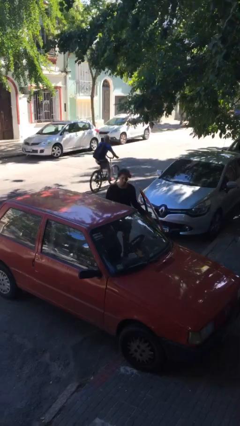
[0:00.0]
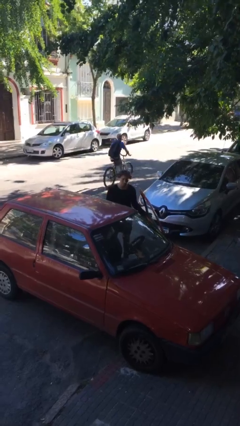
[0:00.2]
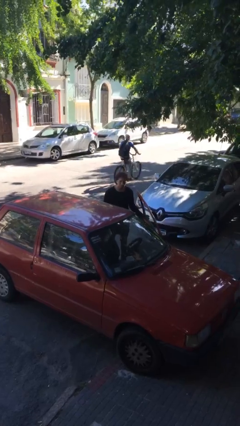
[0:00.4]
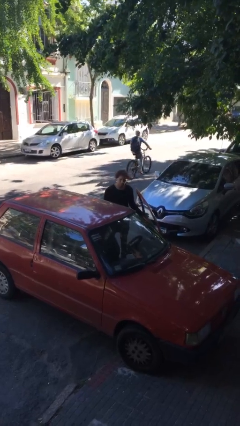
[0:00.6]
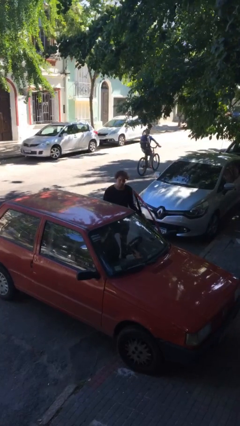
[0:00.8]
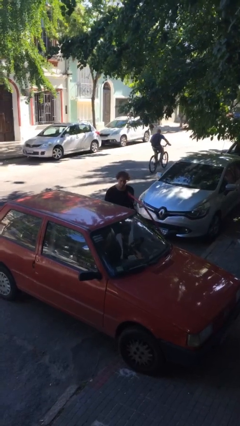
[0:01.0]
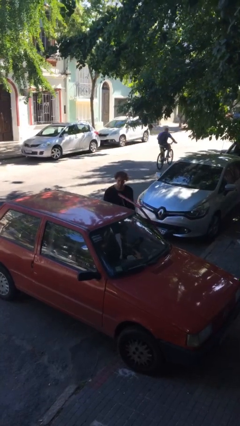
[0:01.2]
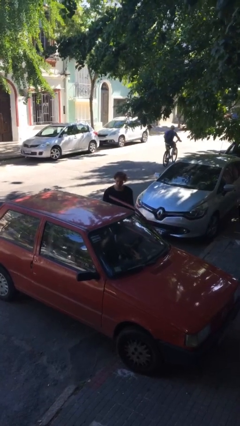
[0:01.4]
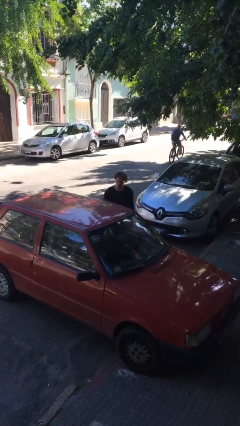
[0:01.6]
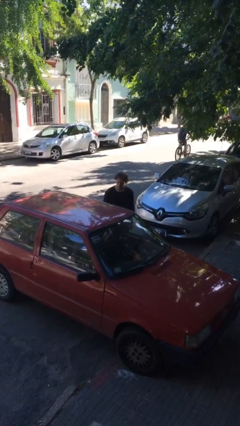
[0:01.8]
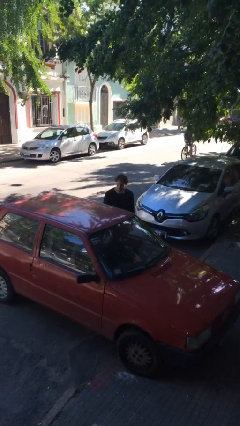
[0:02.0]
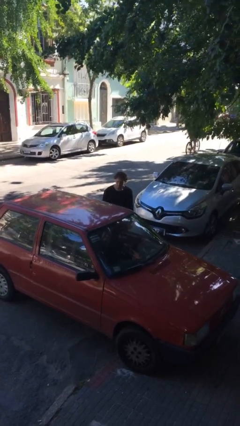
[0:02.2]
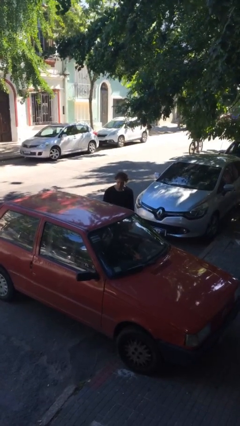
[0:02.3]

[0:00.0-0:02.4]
person closes car door

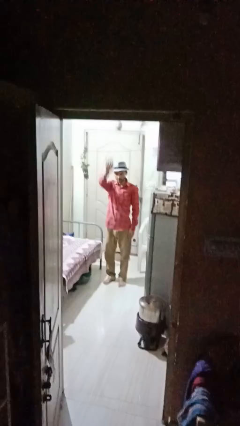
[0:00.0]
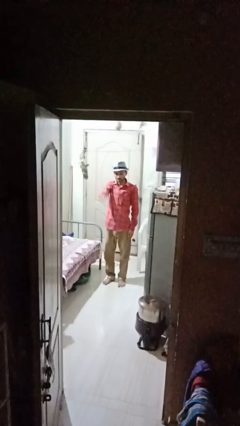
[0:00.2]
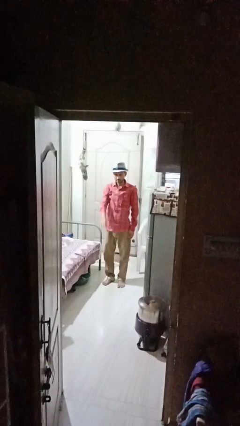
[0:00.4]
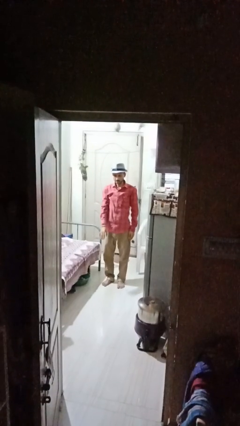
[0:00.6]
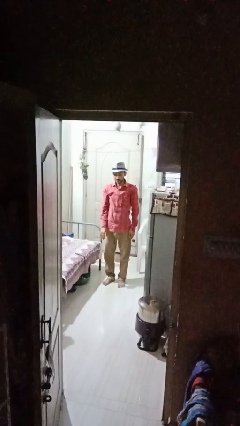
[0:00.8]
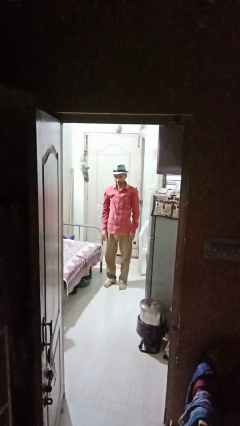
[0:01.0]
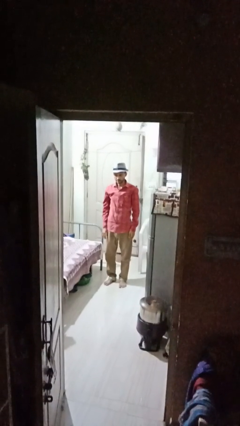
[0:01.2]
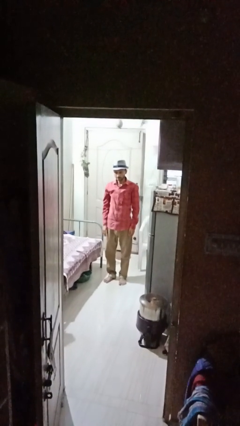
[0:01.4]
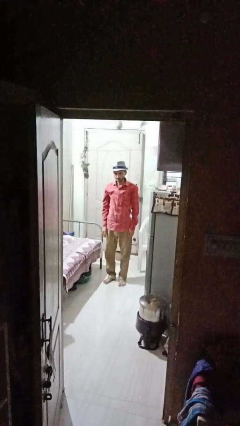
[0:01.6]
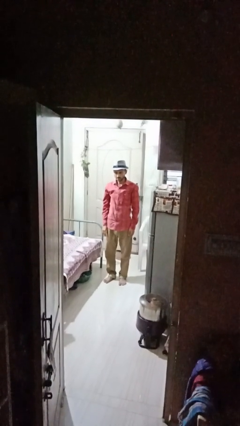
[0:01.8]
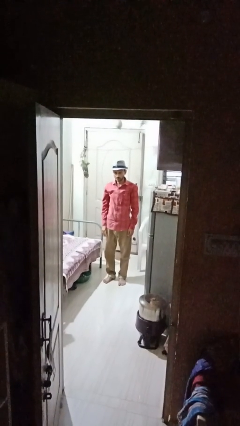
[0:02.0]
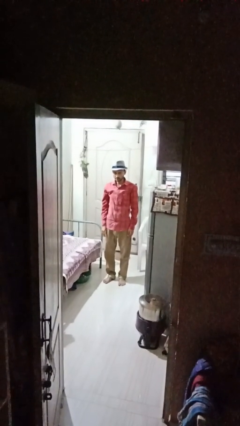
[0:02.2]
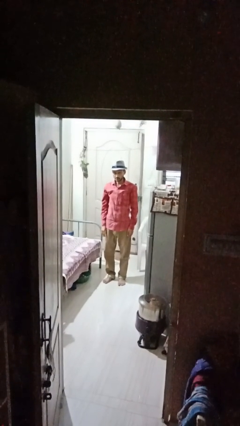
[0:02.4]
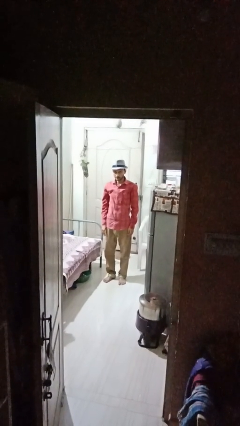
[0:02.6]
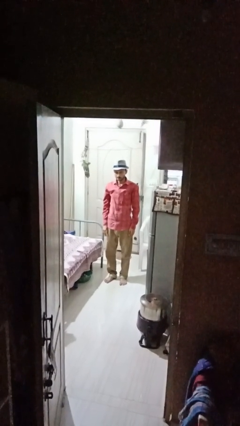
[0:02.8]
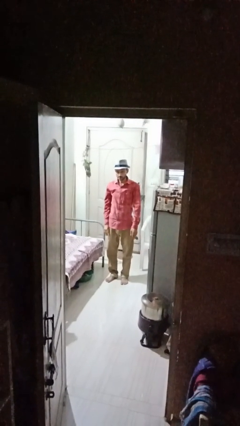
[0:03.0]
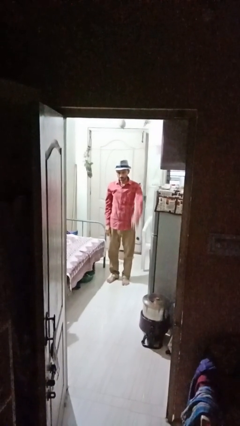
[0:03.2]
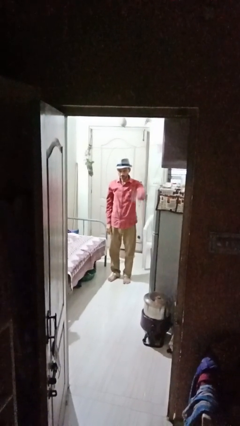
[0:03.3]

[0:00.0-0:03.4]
person gestures lower hand

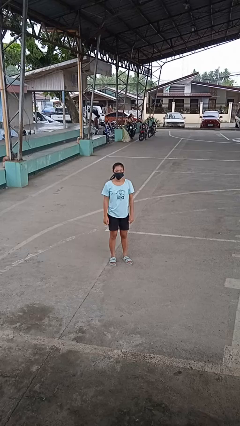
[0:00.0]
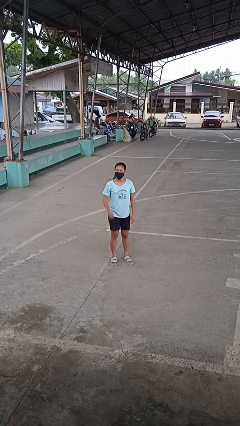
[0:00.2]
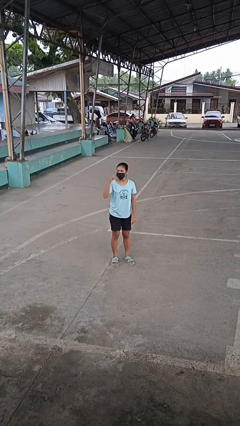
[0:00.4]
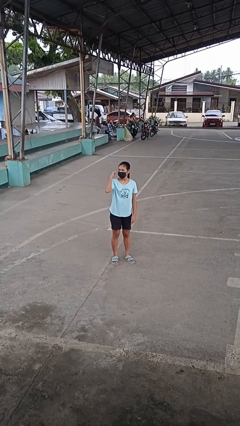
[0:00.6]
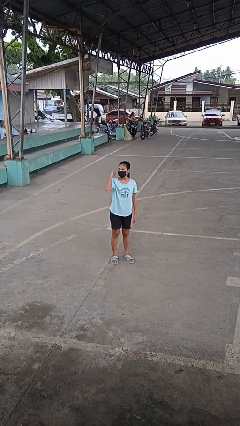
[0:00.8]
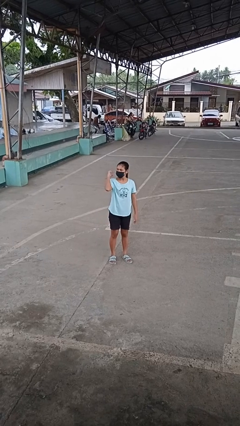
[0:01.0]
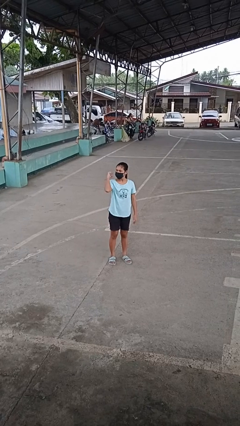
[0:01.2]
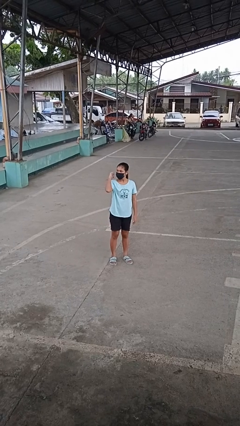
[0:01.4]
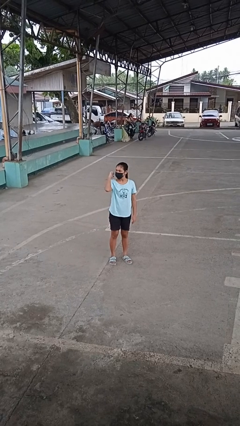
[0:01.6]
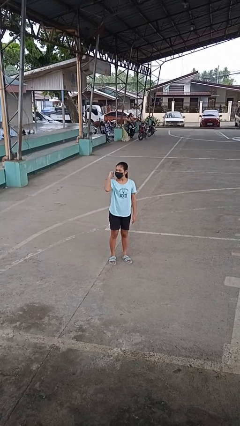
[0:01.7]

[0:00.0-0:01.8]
person gestures behind me

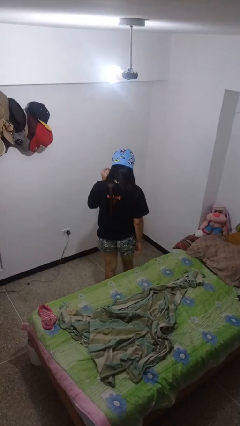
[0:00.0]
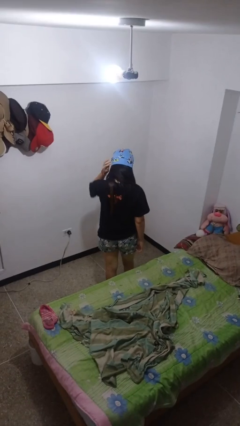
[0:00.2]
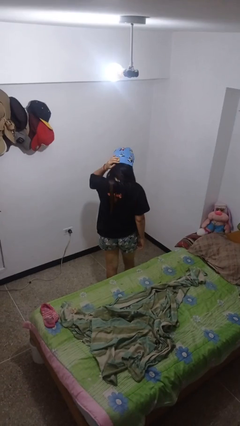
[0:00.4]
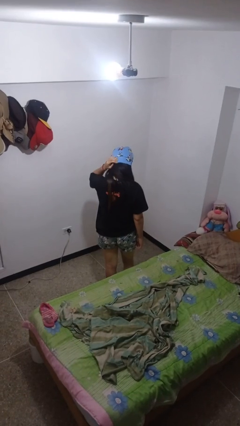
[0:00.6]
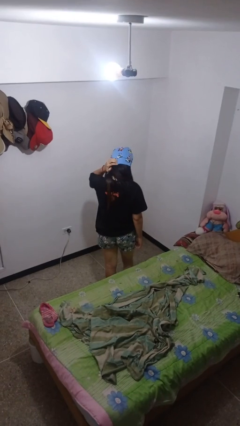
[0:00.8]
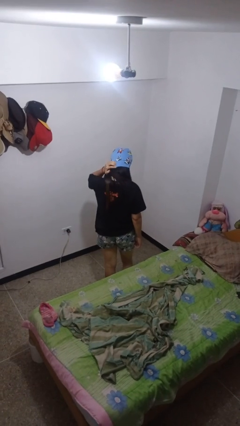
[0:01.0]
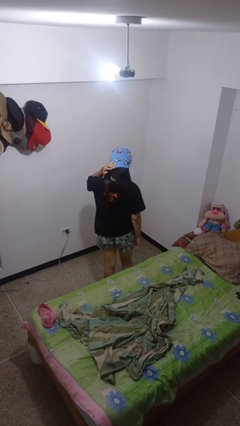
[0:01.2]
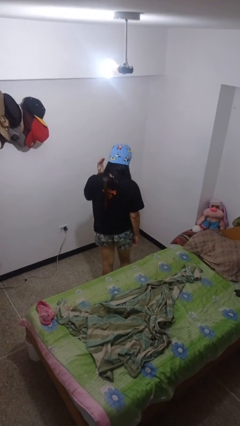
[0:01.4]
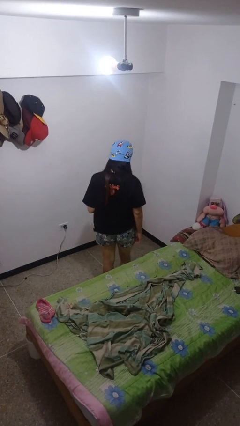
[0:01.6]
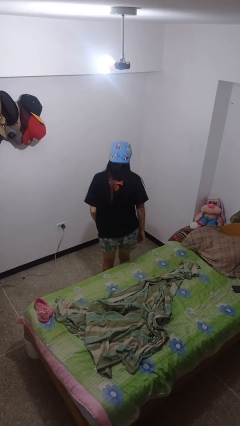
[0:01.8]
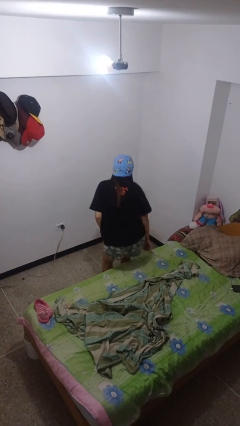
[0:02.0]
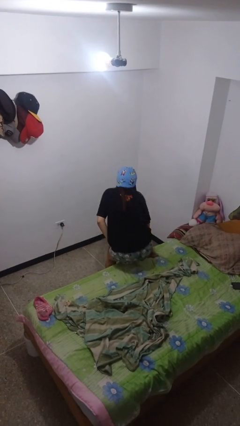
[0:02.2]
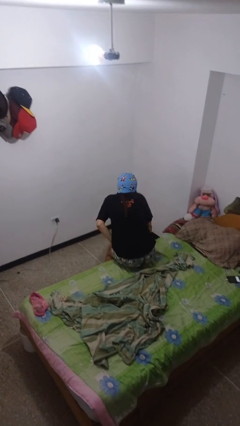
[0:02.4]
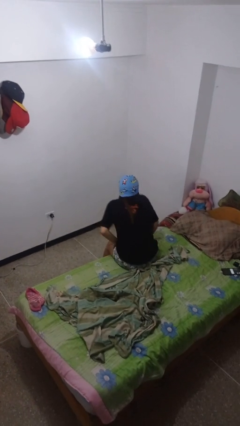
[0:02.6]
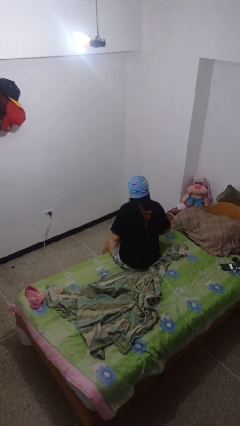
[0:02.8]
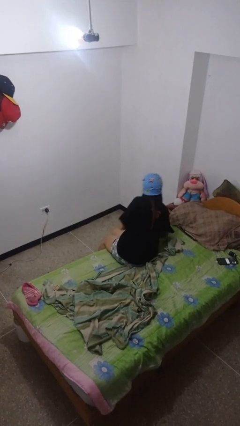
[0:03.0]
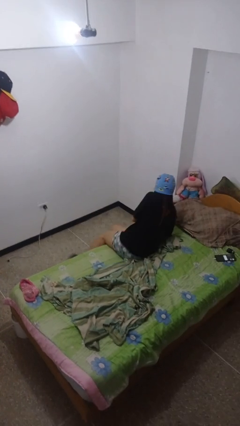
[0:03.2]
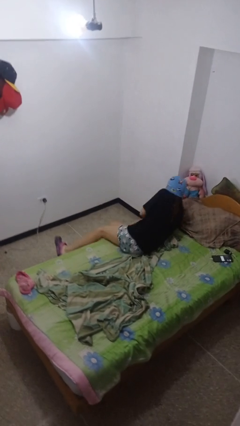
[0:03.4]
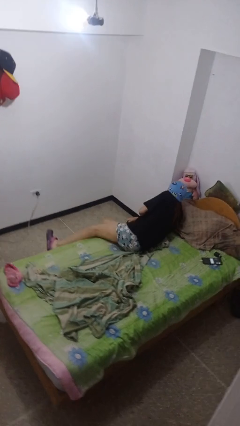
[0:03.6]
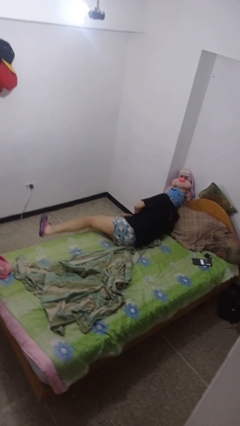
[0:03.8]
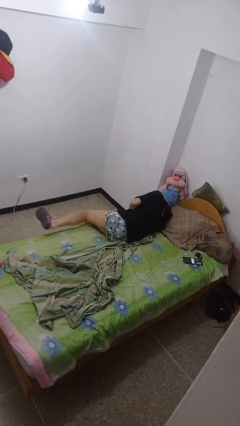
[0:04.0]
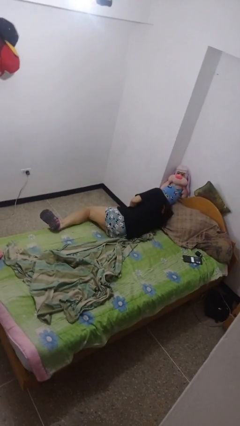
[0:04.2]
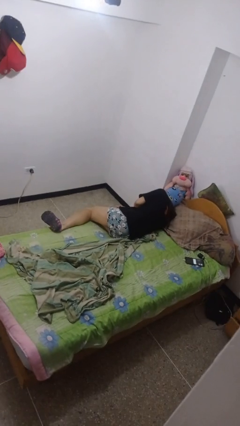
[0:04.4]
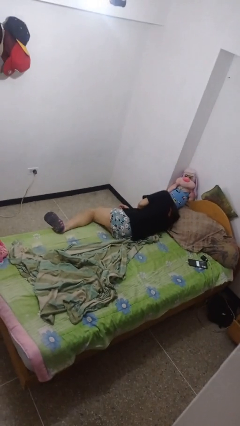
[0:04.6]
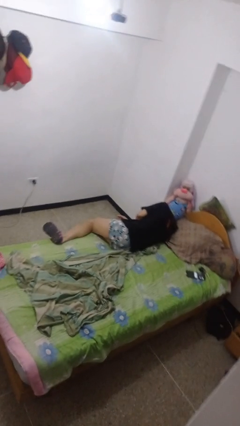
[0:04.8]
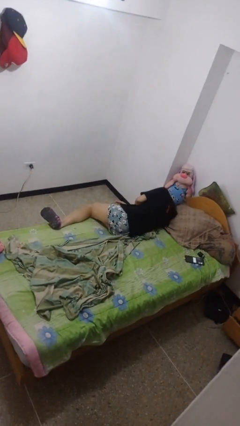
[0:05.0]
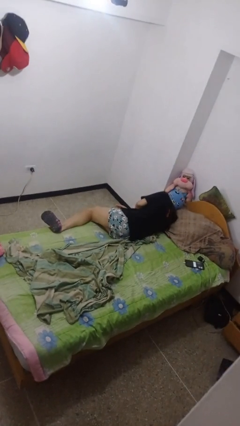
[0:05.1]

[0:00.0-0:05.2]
person lies down on bed

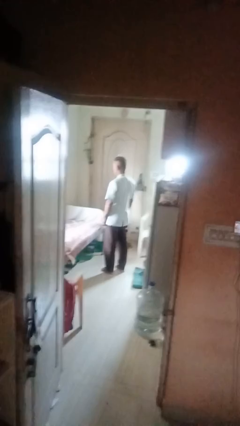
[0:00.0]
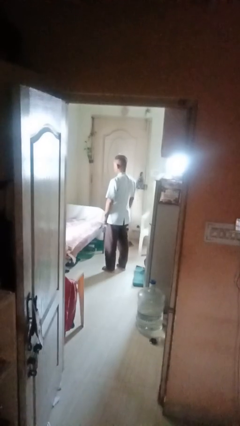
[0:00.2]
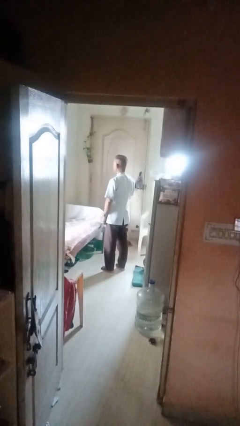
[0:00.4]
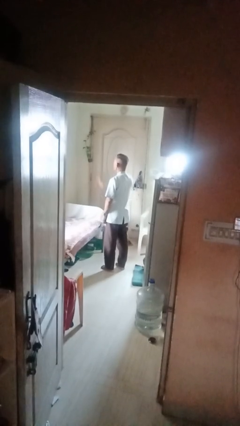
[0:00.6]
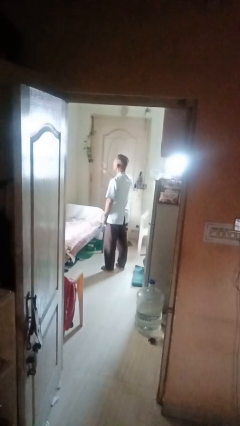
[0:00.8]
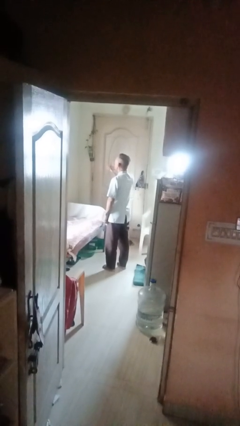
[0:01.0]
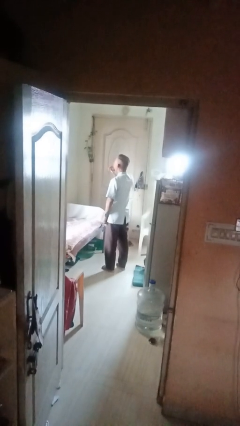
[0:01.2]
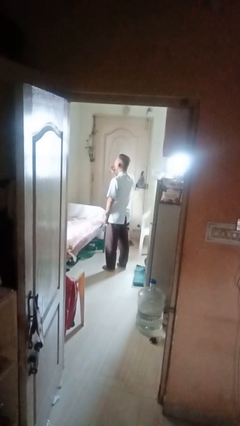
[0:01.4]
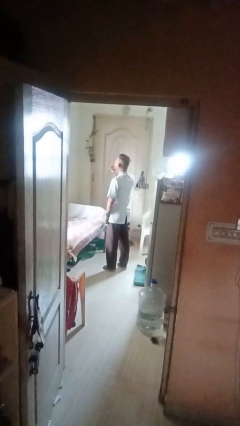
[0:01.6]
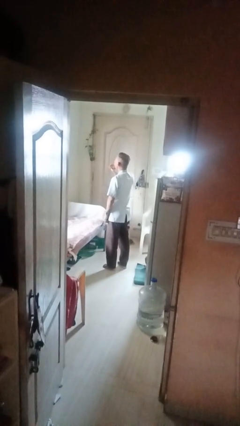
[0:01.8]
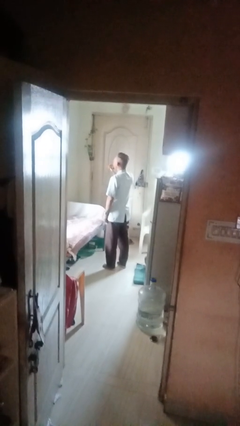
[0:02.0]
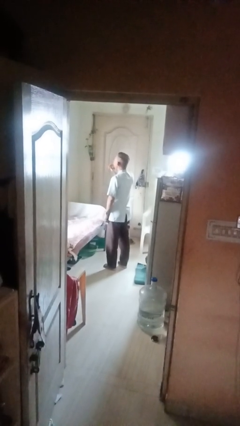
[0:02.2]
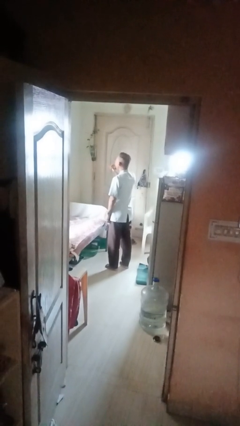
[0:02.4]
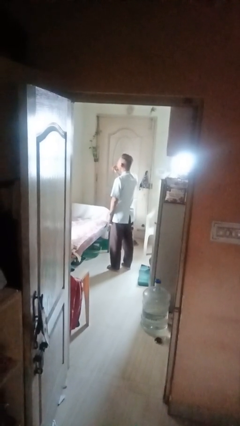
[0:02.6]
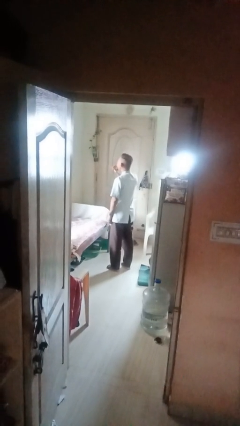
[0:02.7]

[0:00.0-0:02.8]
person gestures be quiet

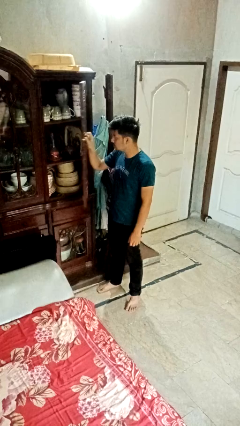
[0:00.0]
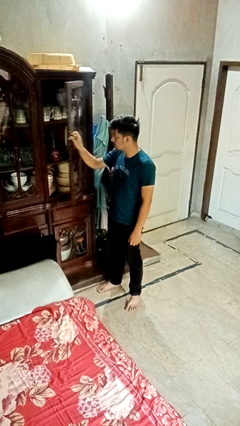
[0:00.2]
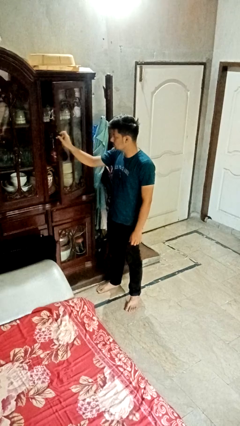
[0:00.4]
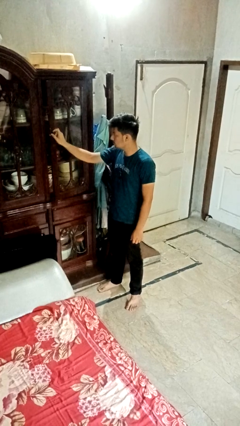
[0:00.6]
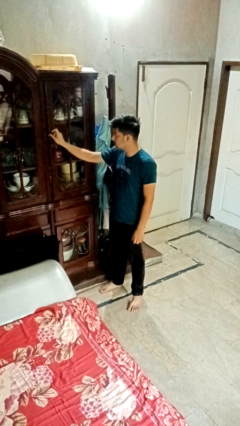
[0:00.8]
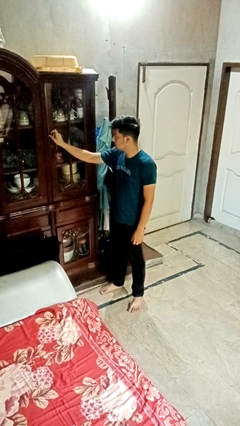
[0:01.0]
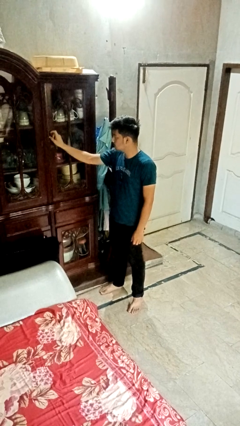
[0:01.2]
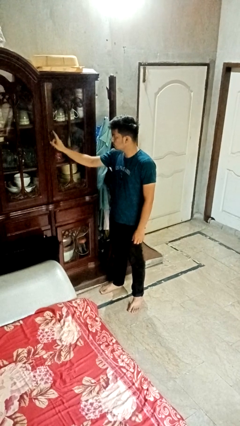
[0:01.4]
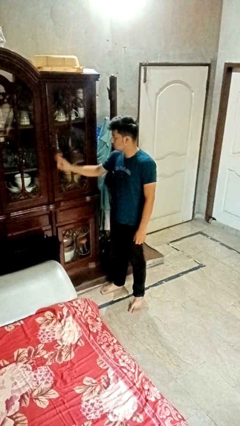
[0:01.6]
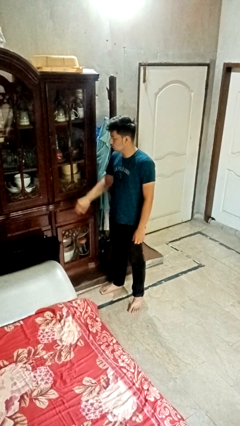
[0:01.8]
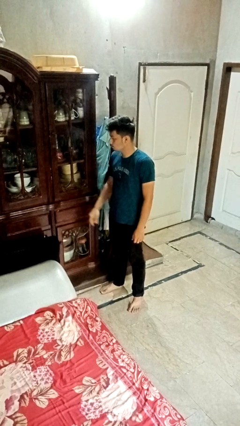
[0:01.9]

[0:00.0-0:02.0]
person closes cabinet
